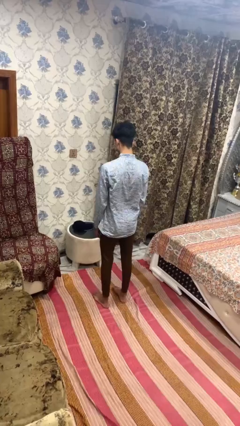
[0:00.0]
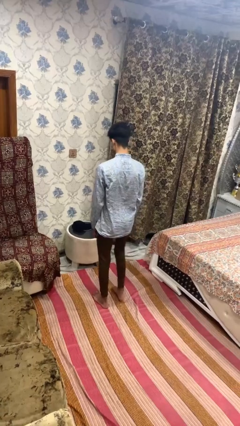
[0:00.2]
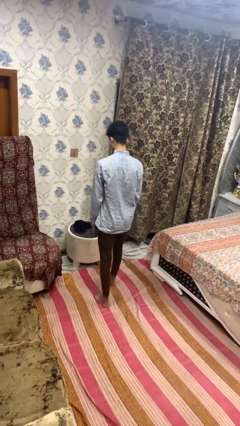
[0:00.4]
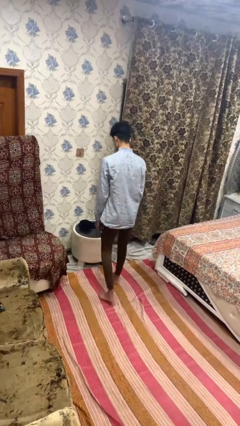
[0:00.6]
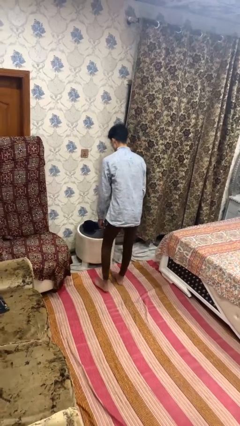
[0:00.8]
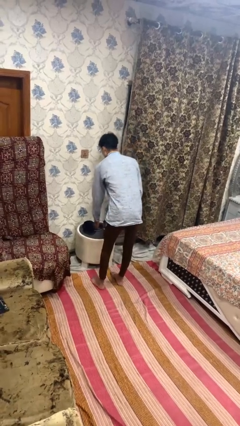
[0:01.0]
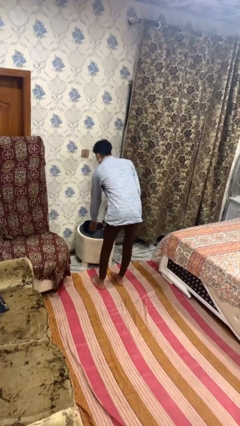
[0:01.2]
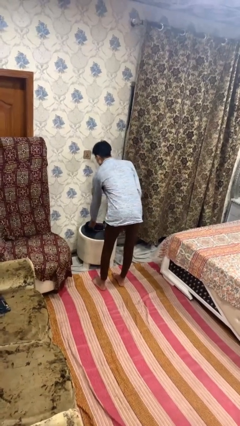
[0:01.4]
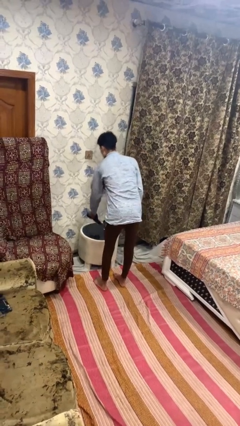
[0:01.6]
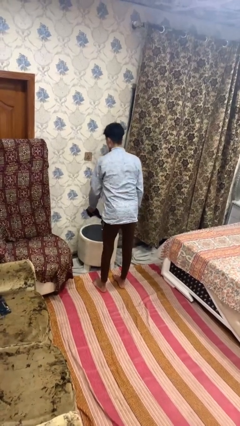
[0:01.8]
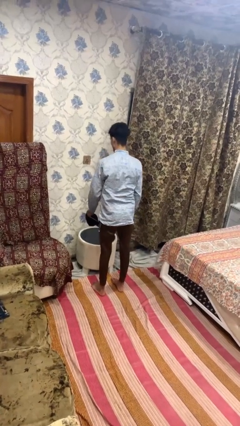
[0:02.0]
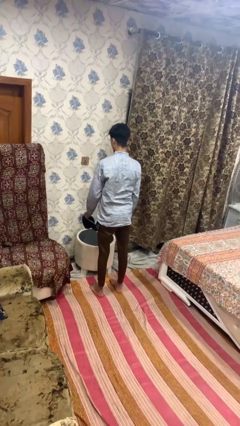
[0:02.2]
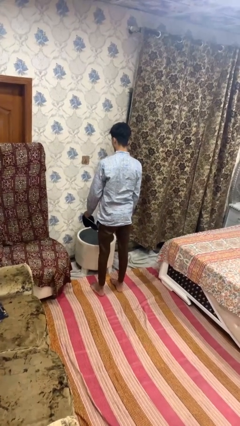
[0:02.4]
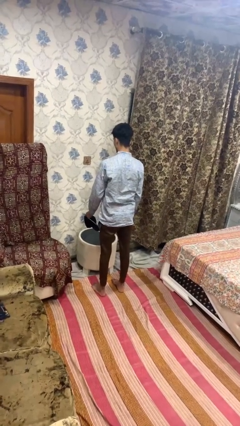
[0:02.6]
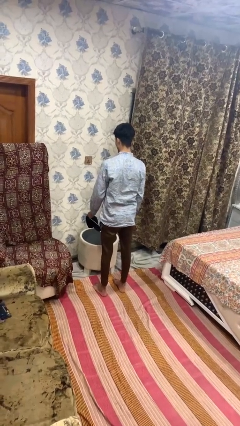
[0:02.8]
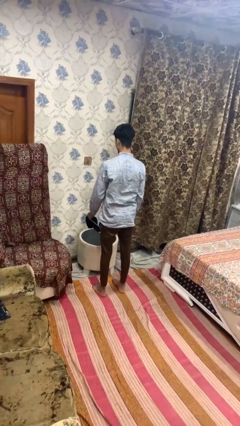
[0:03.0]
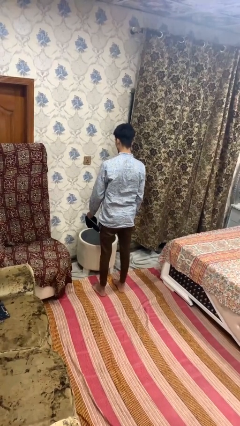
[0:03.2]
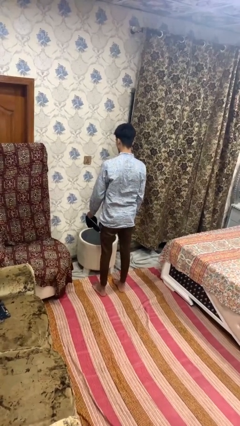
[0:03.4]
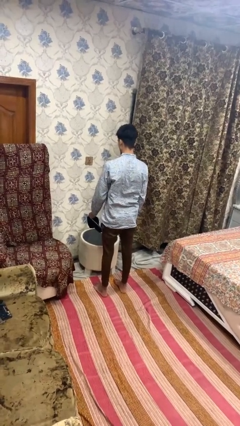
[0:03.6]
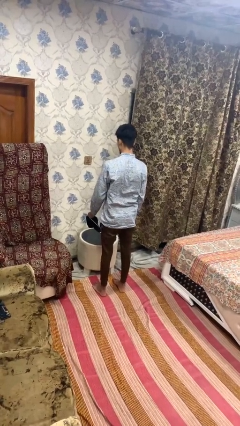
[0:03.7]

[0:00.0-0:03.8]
person picks up object from table

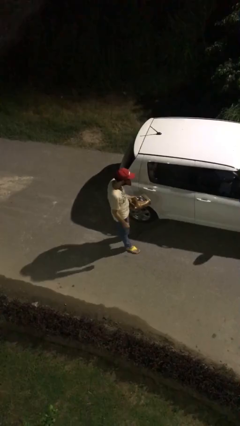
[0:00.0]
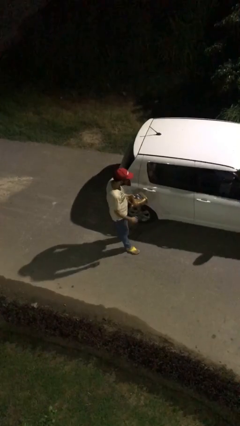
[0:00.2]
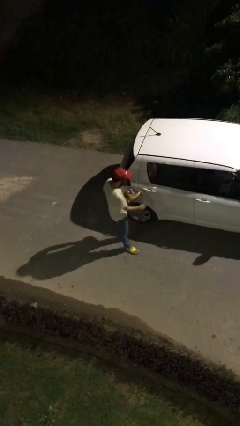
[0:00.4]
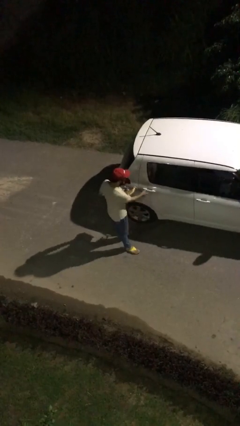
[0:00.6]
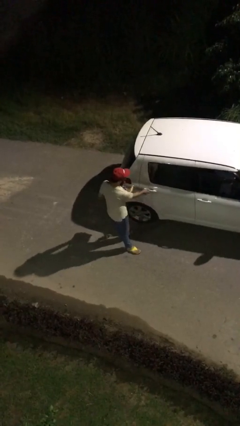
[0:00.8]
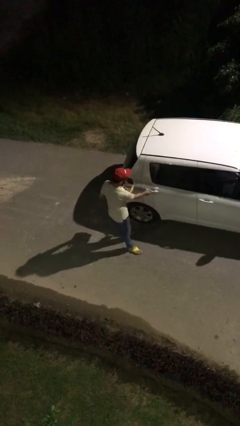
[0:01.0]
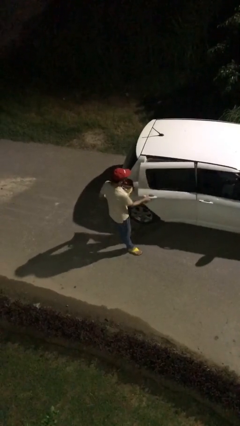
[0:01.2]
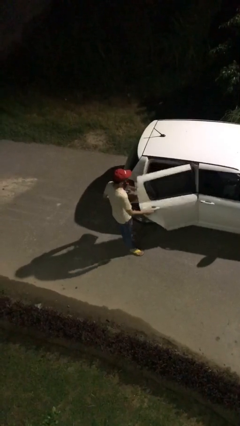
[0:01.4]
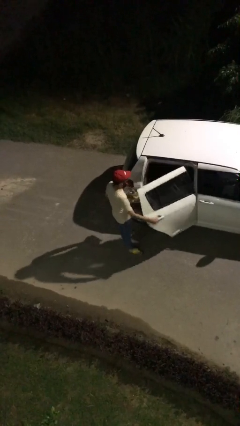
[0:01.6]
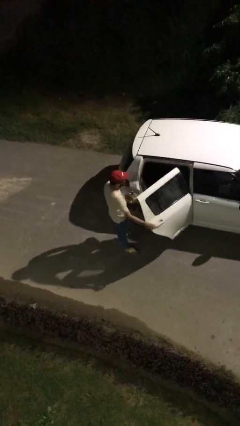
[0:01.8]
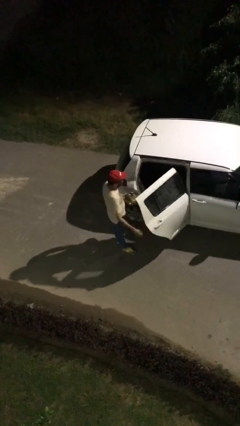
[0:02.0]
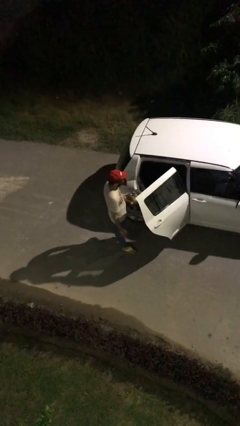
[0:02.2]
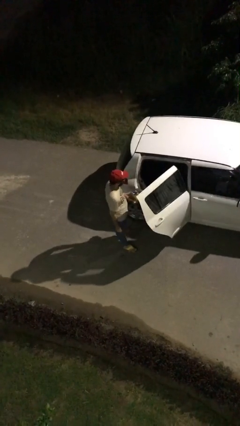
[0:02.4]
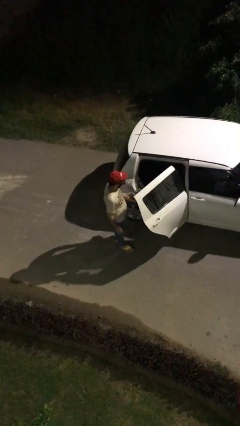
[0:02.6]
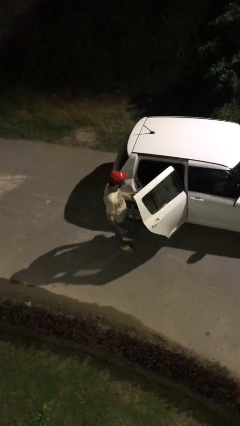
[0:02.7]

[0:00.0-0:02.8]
person opens car door

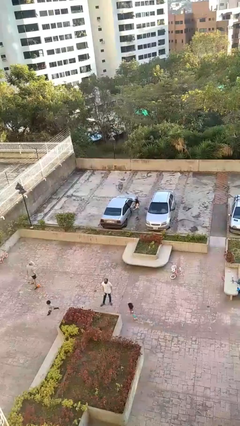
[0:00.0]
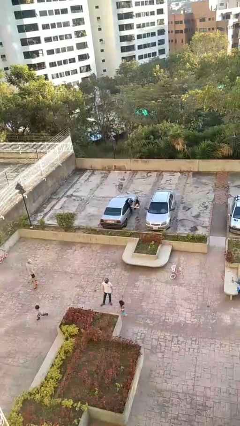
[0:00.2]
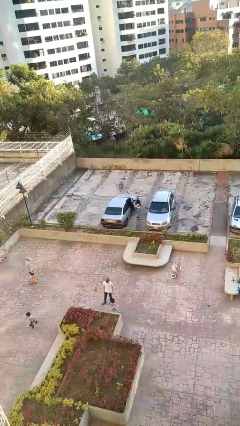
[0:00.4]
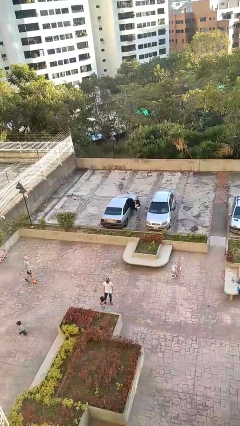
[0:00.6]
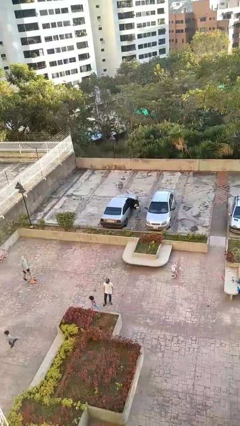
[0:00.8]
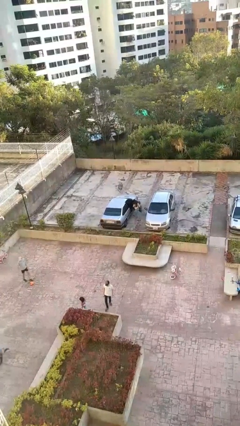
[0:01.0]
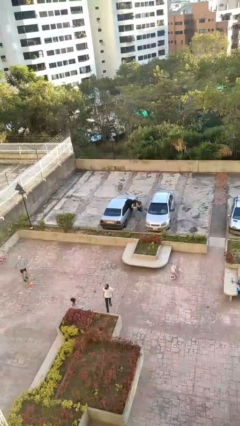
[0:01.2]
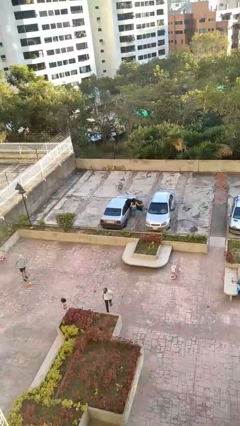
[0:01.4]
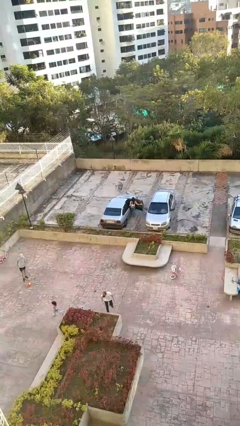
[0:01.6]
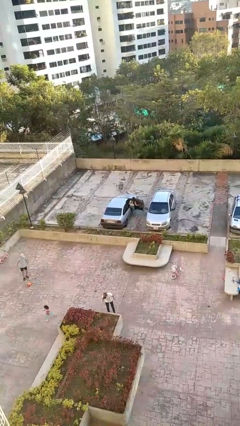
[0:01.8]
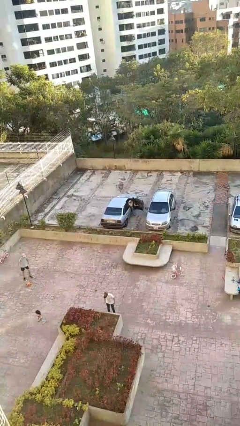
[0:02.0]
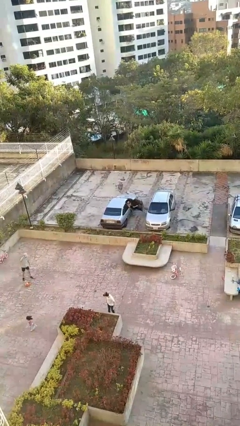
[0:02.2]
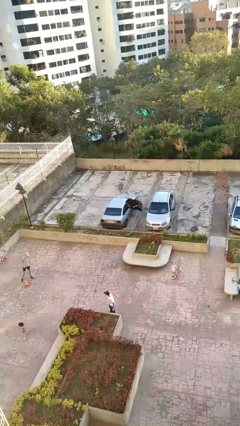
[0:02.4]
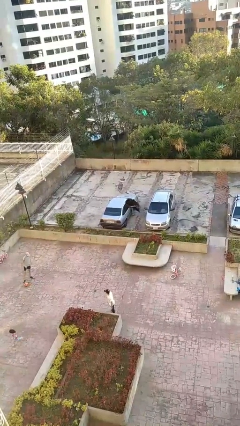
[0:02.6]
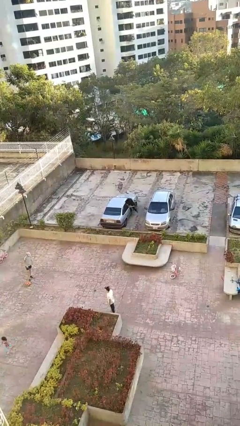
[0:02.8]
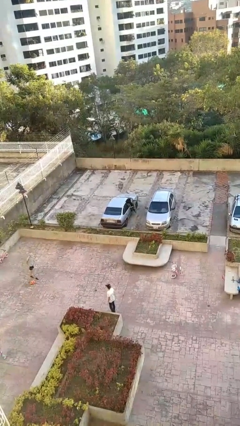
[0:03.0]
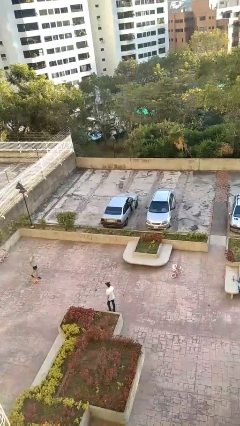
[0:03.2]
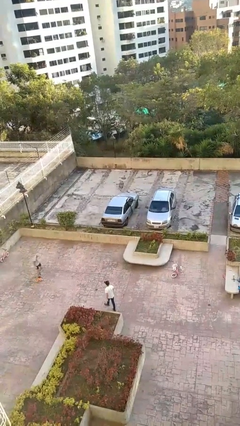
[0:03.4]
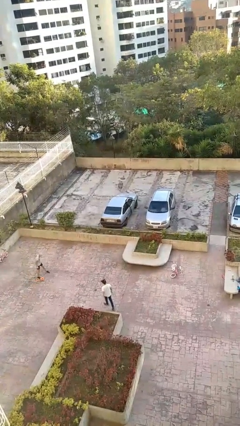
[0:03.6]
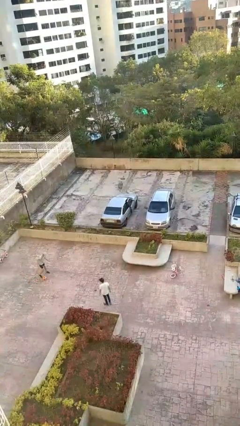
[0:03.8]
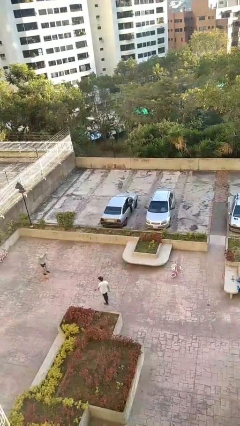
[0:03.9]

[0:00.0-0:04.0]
car picks up person

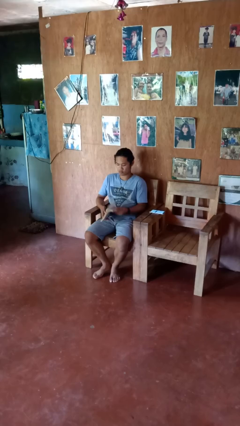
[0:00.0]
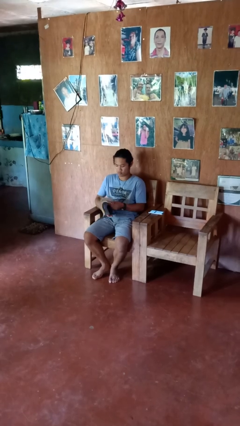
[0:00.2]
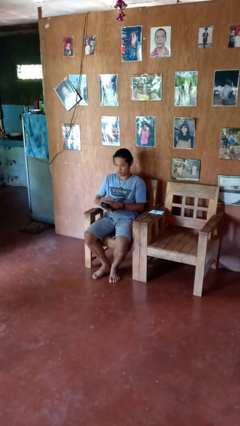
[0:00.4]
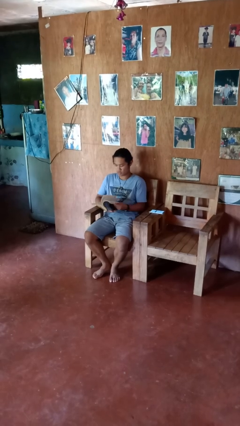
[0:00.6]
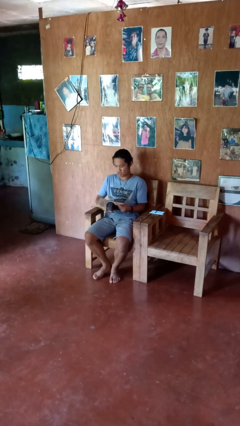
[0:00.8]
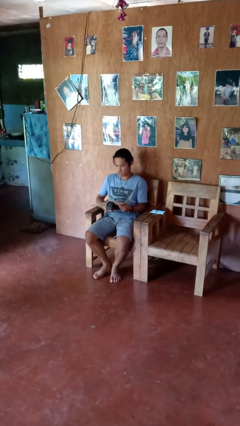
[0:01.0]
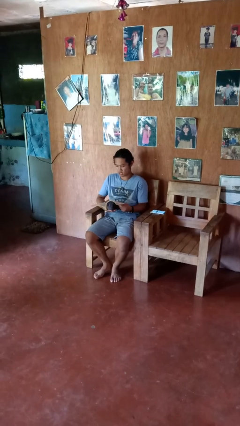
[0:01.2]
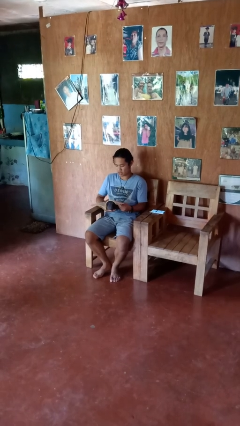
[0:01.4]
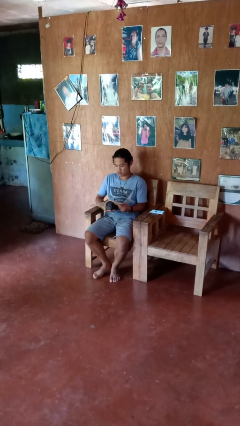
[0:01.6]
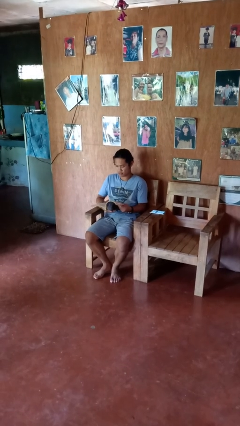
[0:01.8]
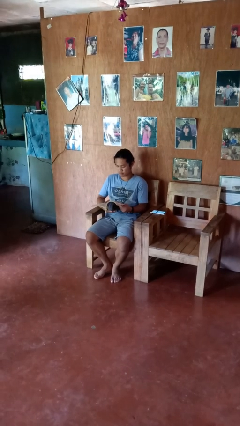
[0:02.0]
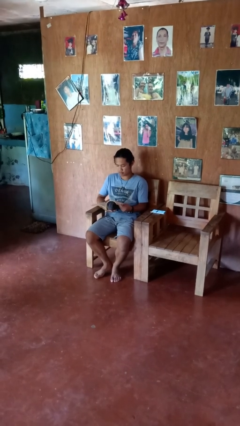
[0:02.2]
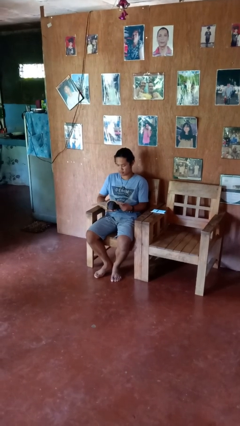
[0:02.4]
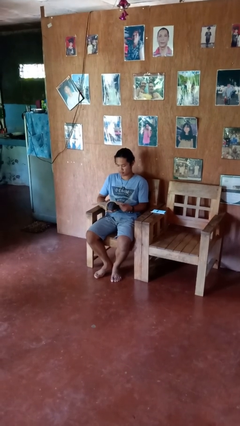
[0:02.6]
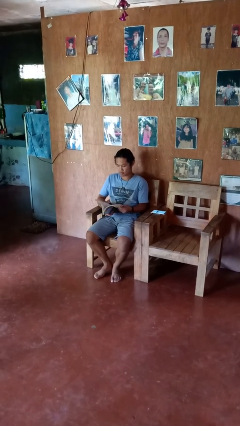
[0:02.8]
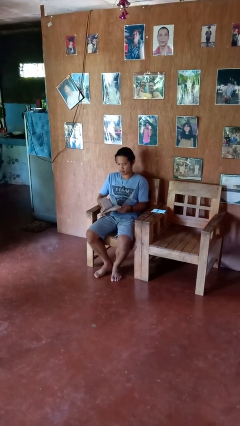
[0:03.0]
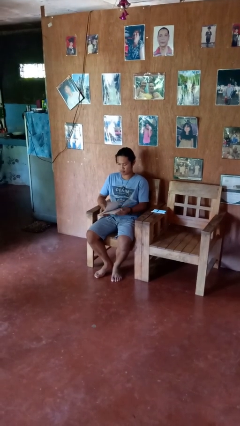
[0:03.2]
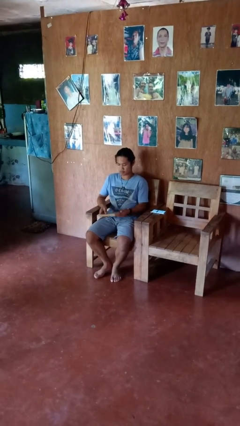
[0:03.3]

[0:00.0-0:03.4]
person reads book

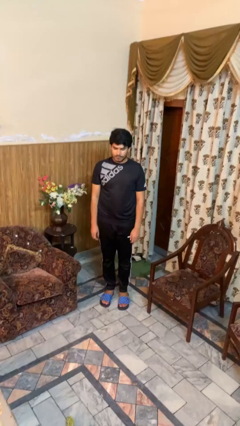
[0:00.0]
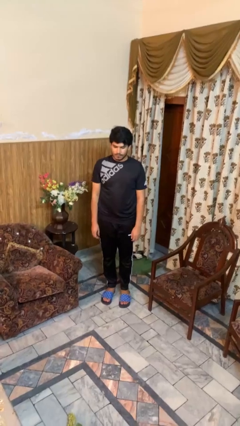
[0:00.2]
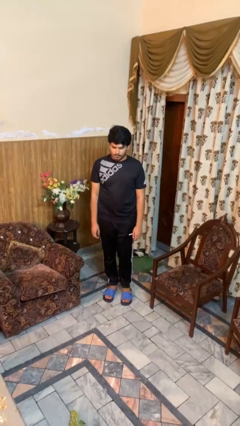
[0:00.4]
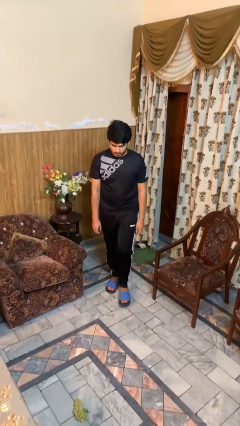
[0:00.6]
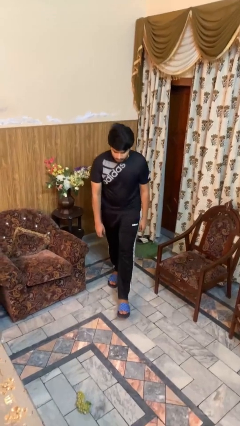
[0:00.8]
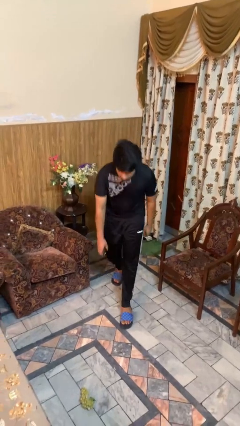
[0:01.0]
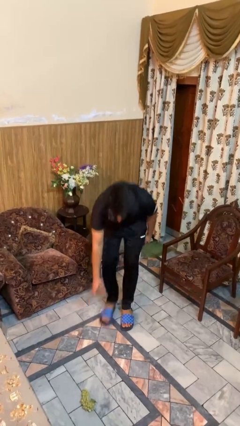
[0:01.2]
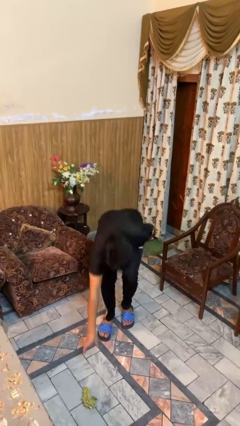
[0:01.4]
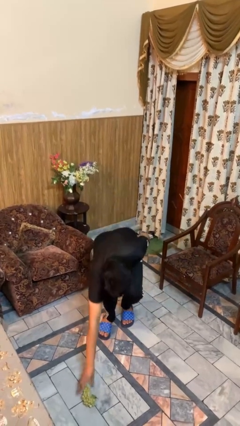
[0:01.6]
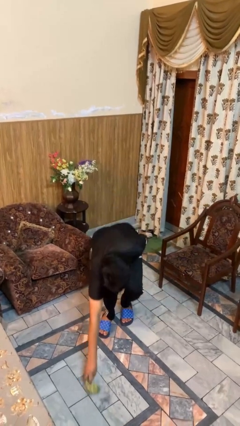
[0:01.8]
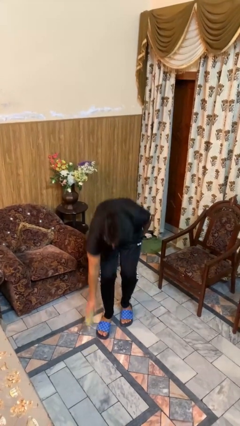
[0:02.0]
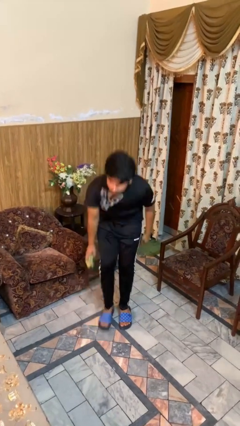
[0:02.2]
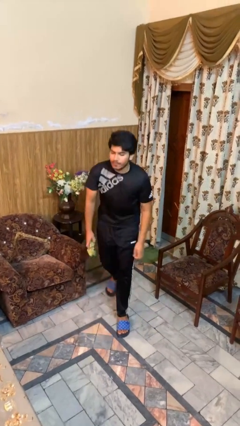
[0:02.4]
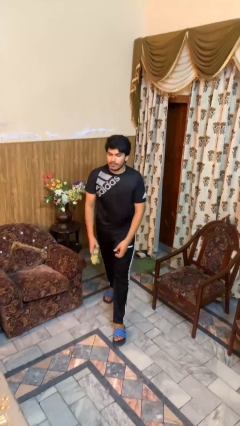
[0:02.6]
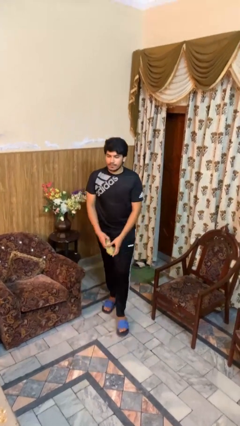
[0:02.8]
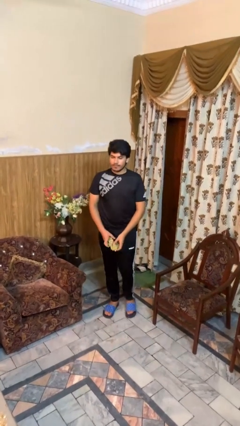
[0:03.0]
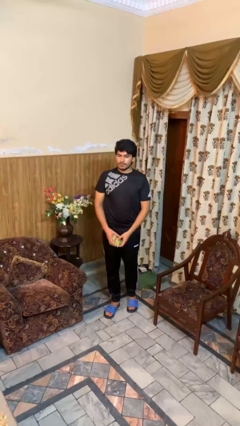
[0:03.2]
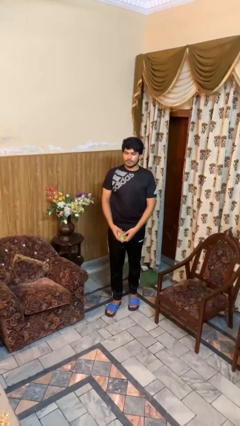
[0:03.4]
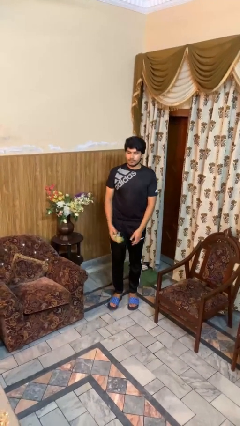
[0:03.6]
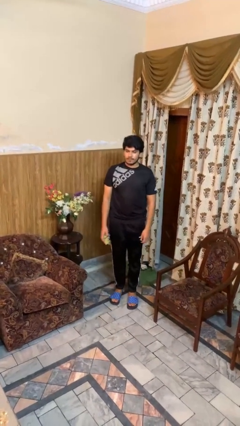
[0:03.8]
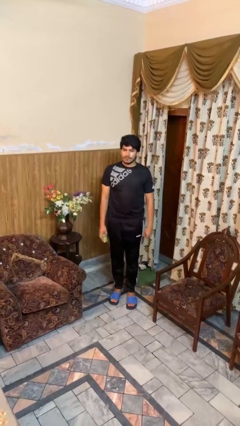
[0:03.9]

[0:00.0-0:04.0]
person picks up object from floor
